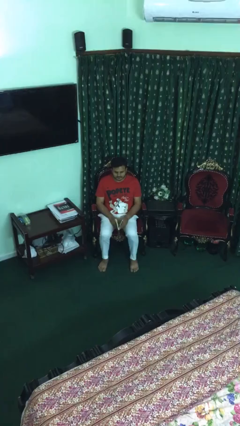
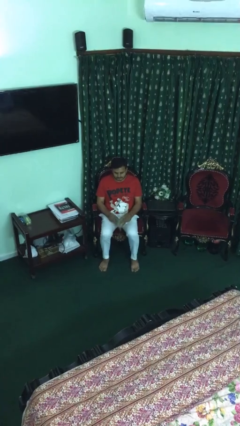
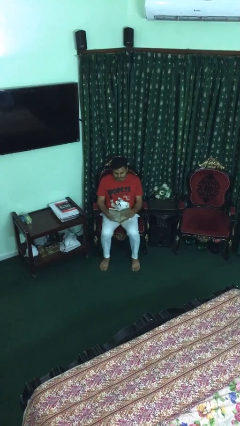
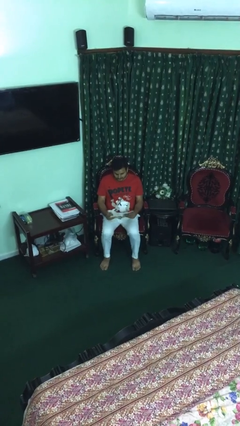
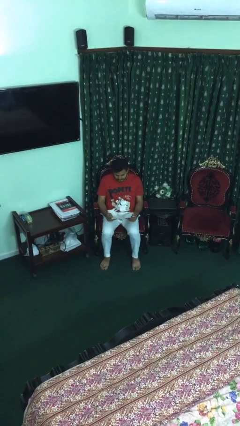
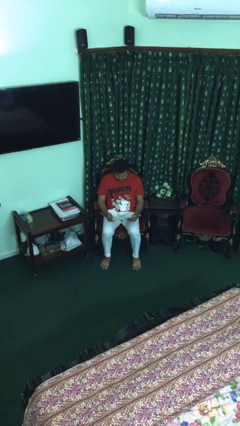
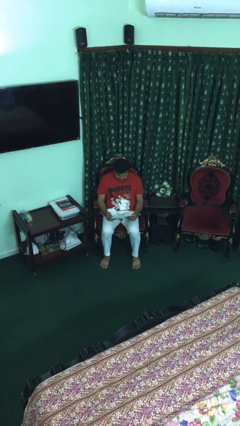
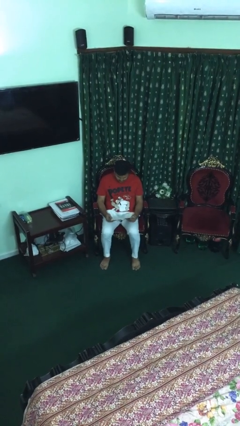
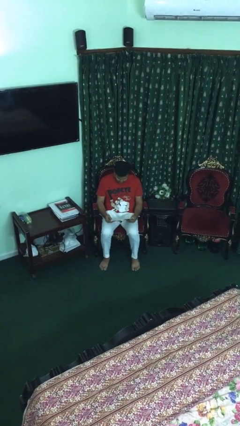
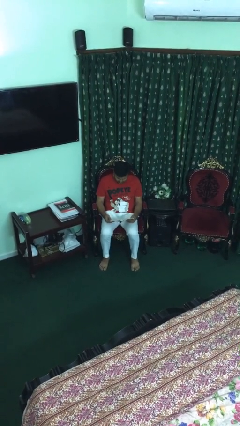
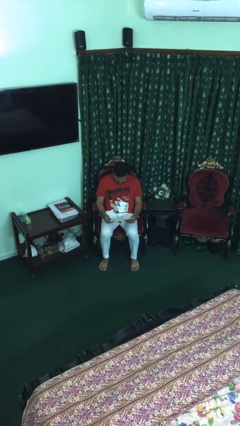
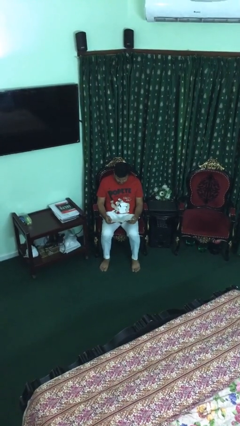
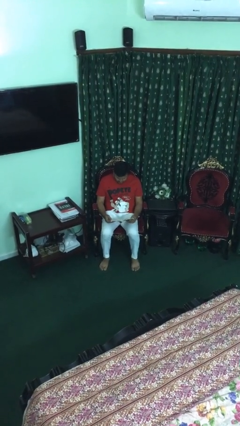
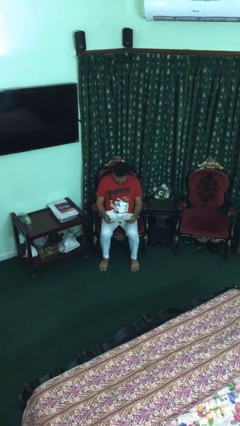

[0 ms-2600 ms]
person reads document

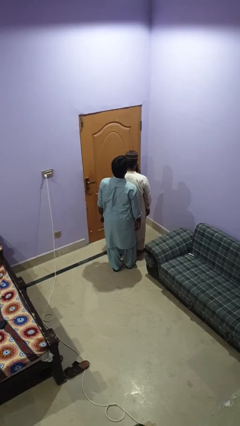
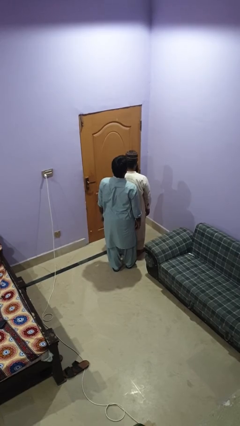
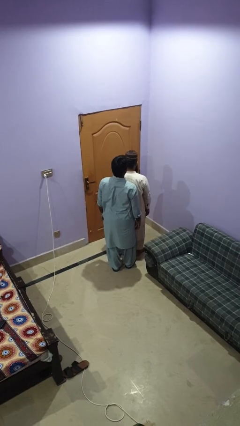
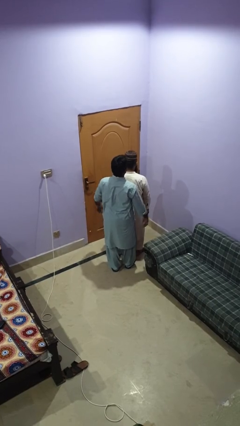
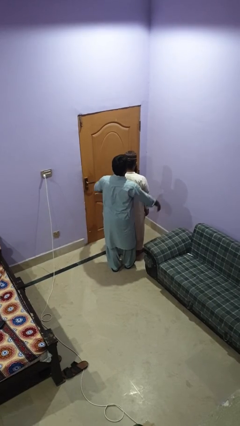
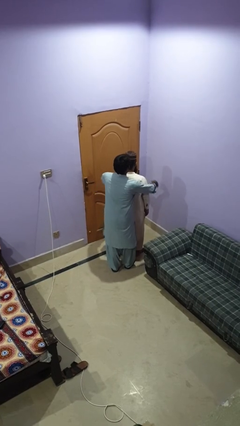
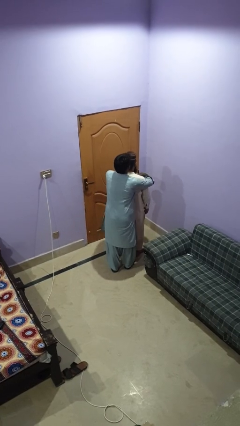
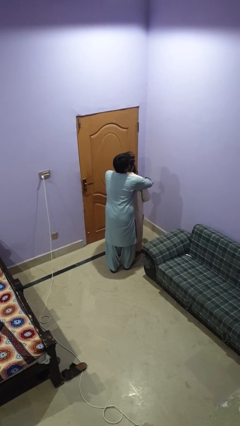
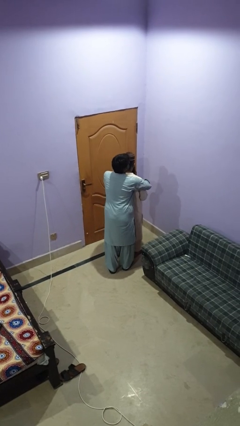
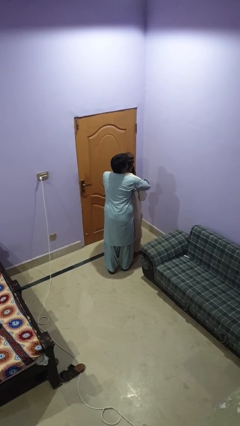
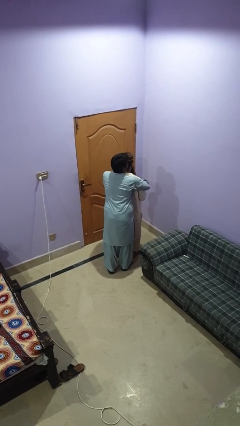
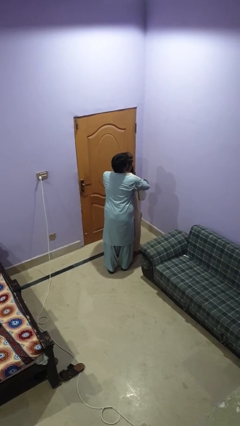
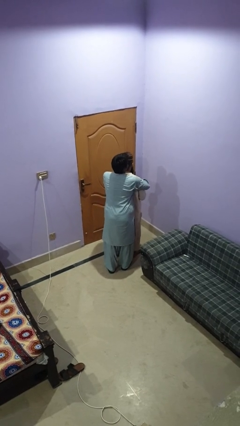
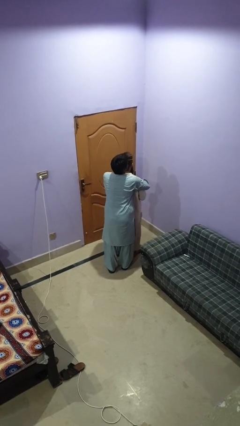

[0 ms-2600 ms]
person hugs person from behind

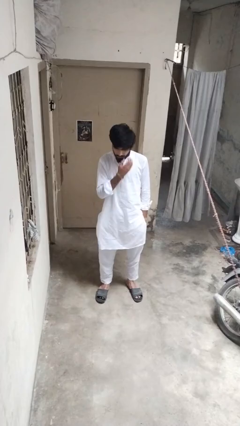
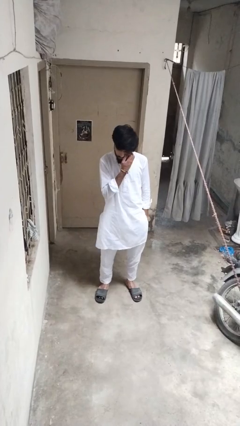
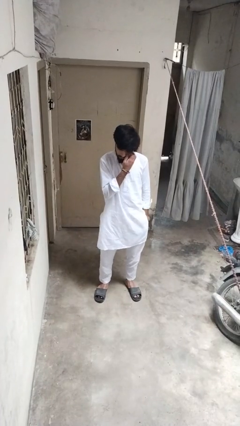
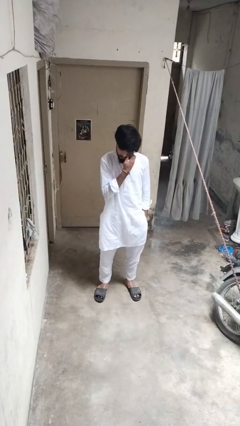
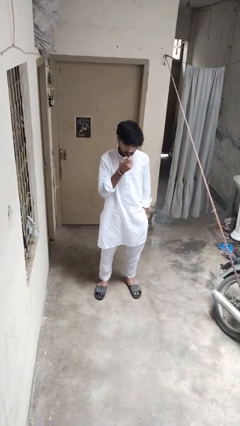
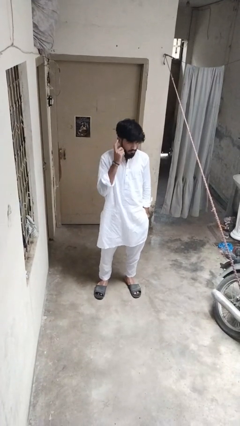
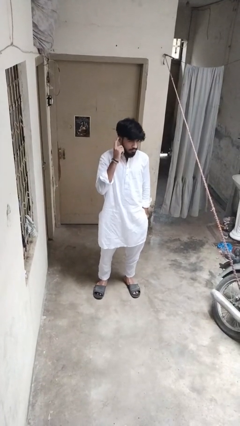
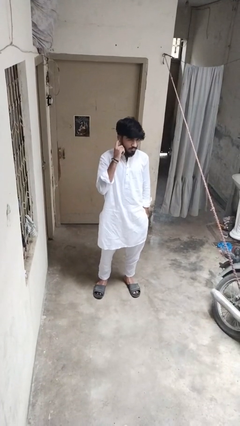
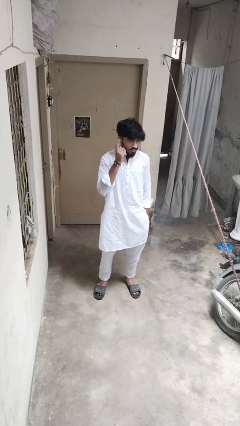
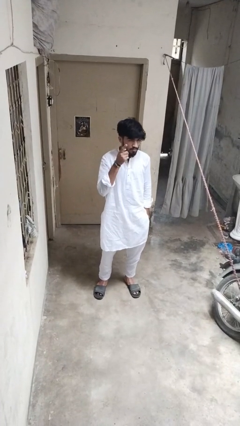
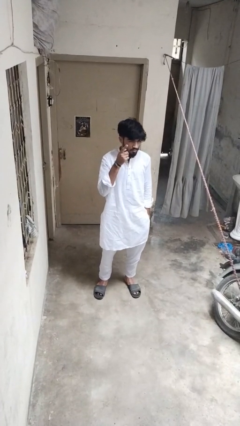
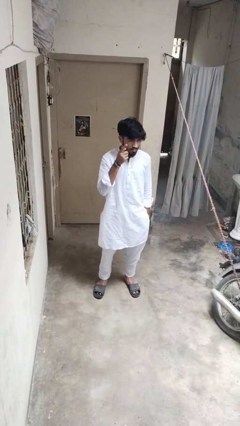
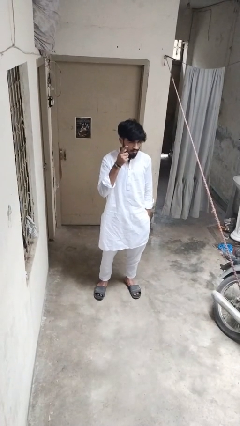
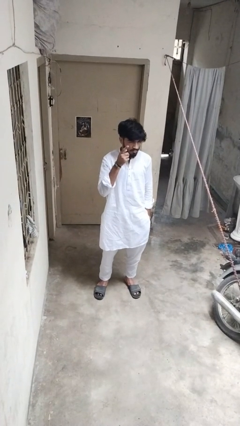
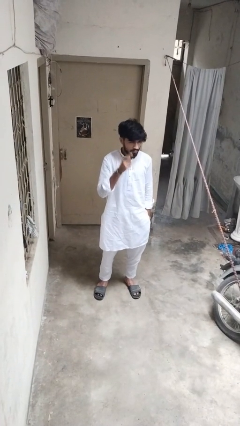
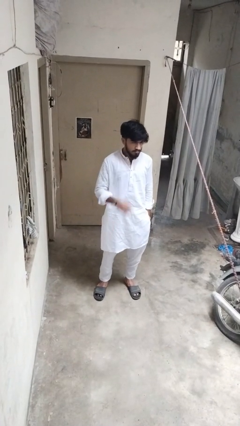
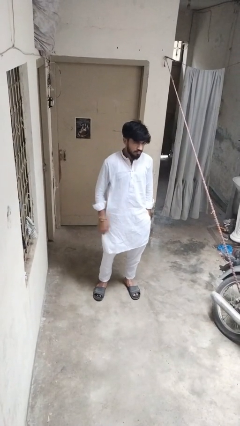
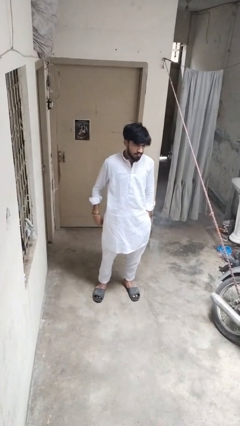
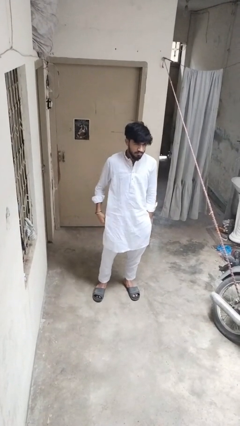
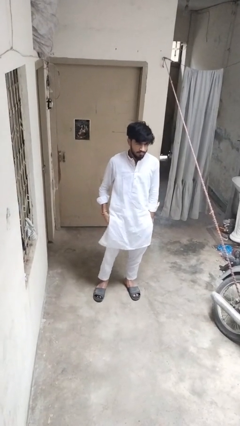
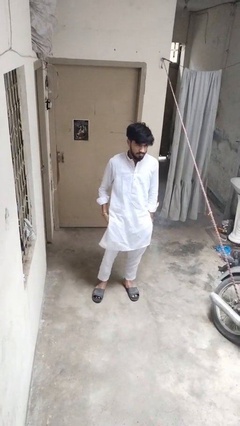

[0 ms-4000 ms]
person gestures listen closely

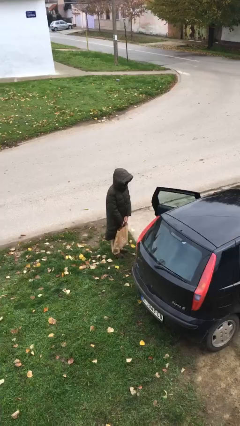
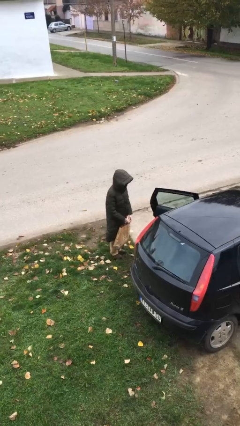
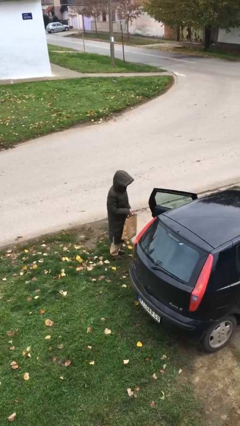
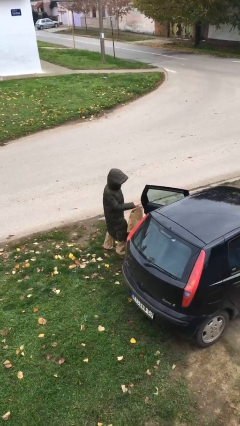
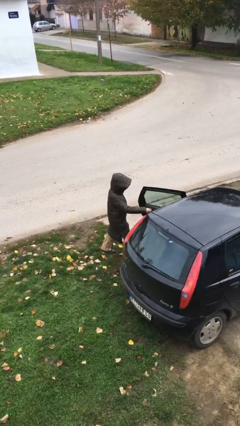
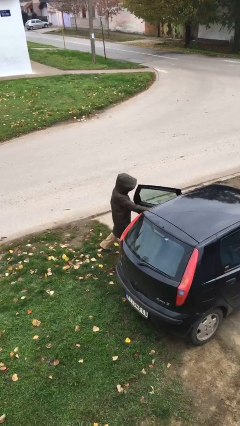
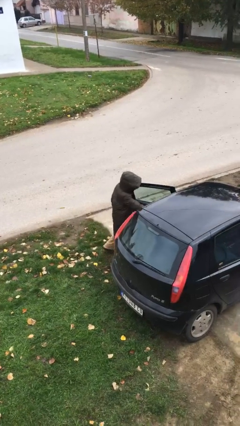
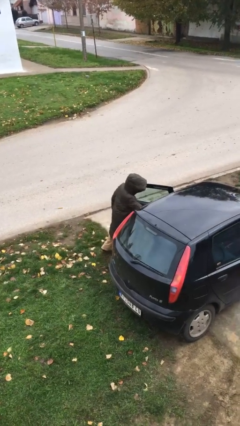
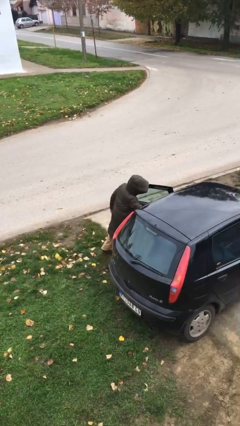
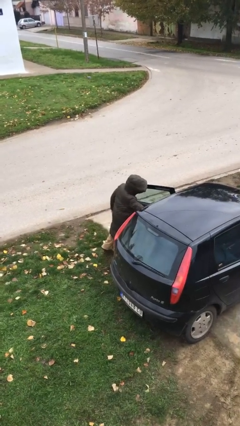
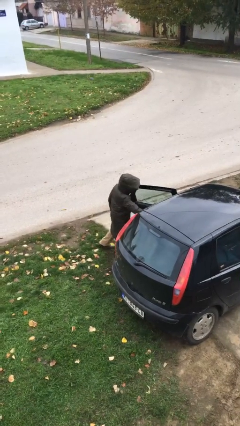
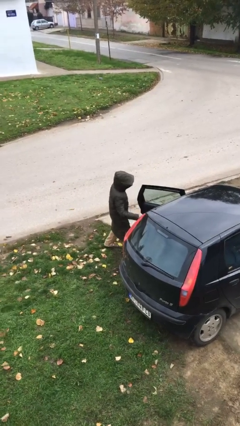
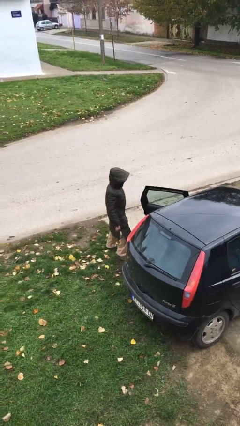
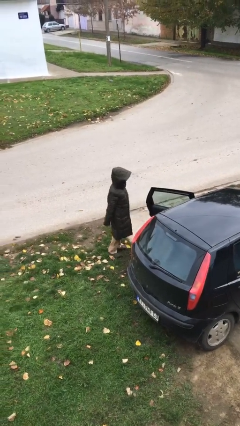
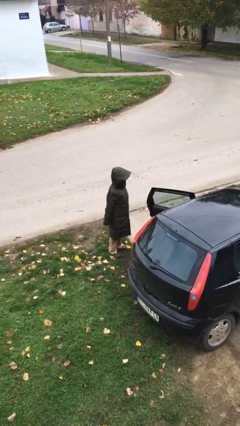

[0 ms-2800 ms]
person loads car

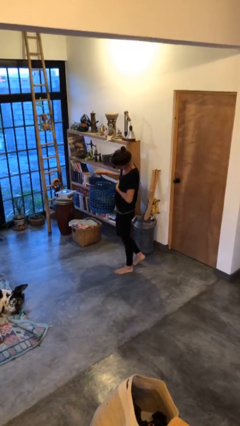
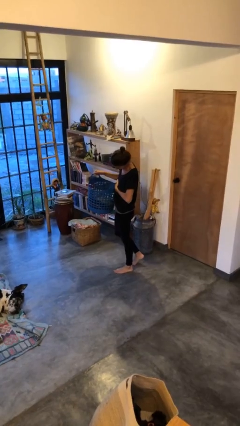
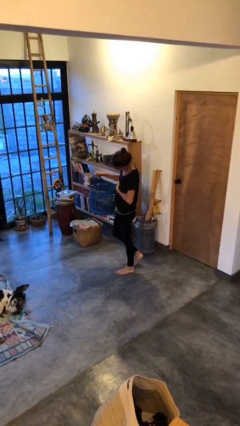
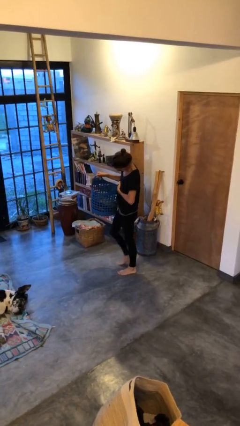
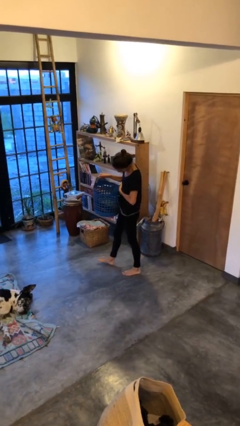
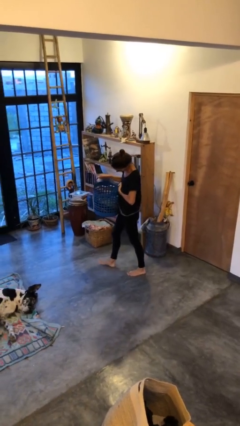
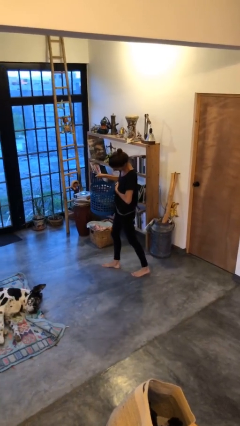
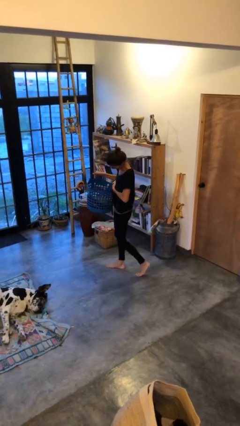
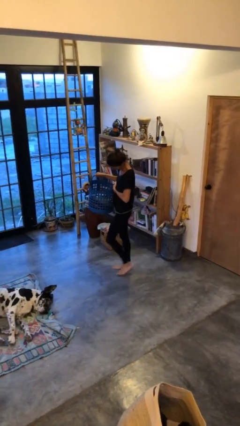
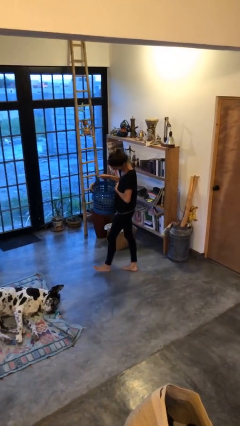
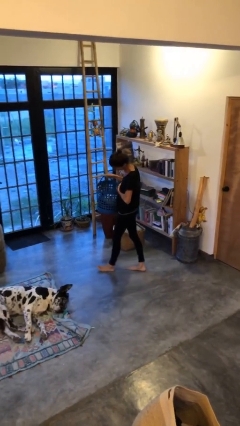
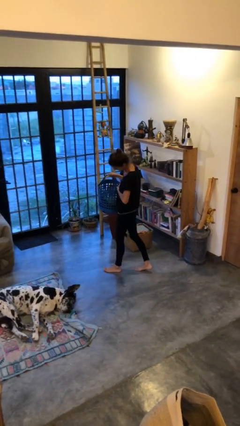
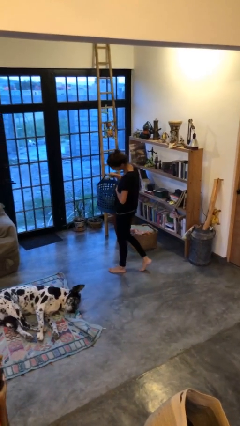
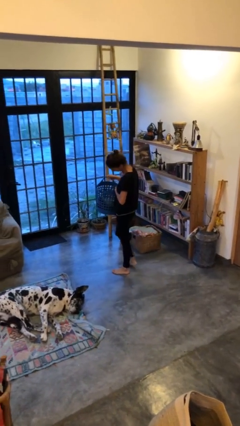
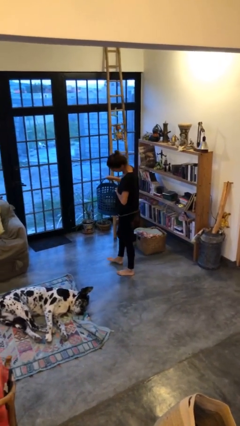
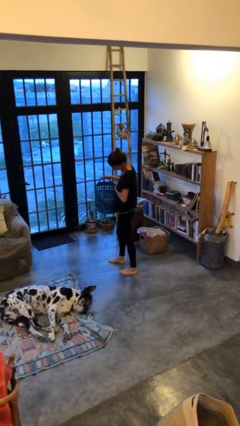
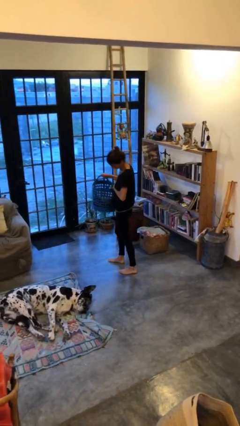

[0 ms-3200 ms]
person carries laundry basket

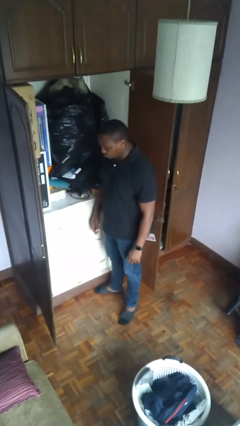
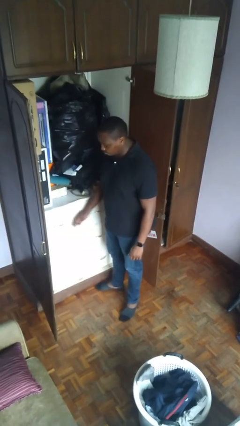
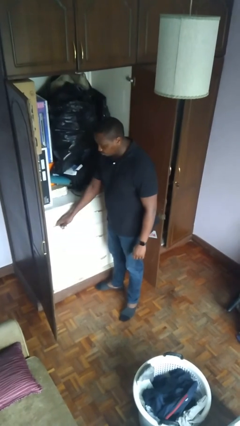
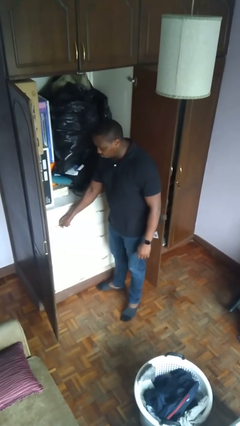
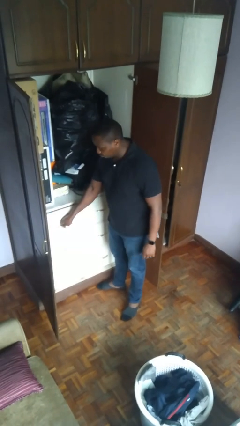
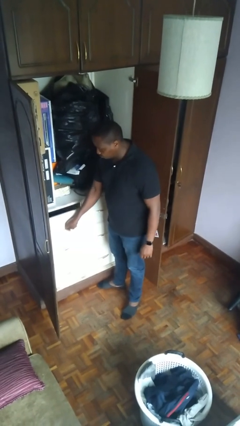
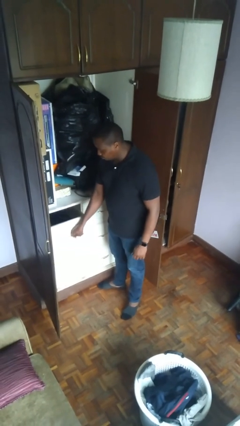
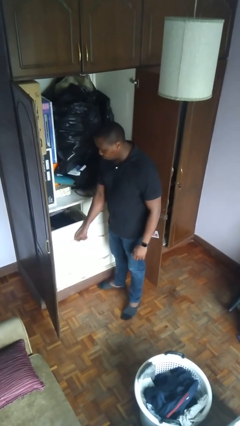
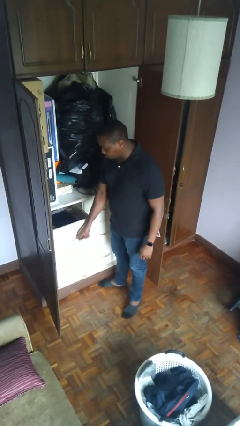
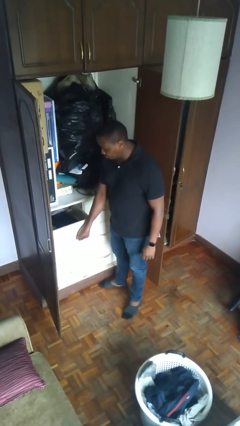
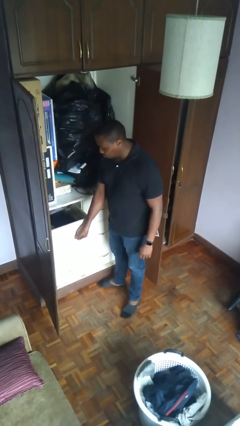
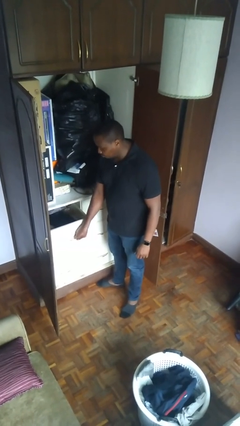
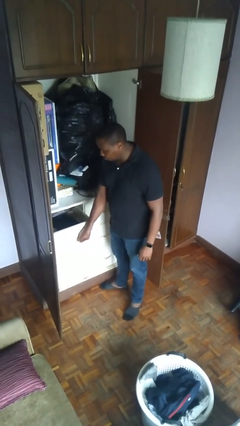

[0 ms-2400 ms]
person opens dresser drawer

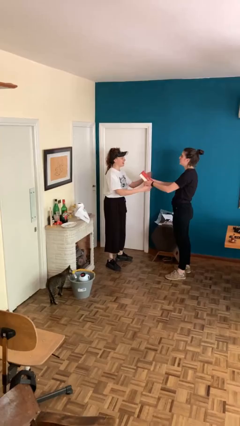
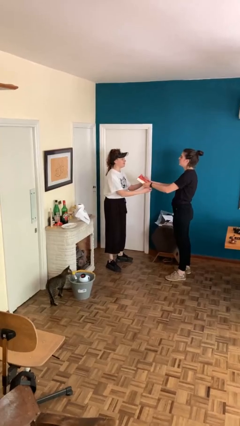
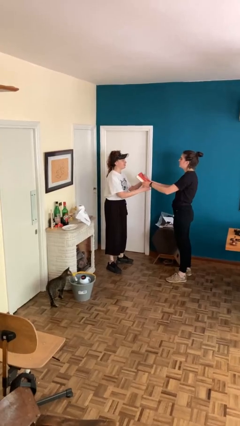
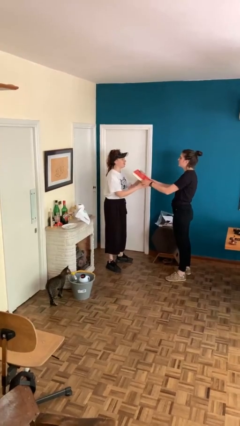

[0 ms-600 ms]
person transfers object to person
